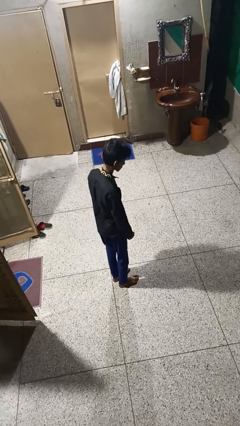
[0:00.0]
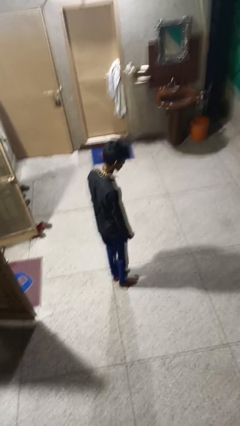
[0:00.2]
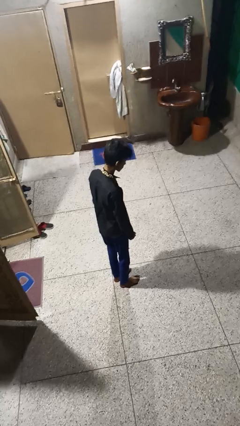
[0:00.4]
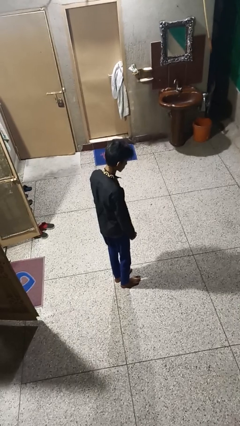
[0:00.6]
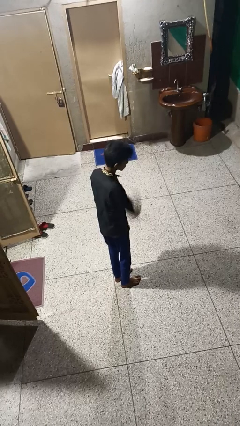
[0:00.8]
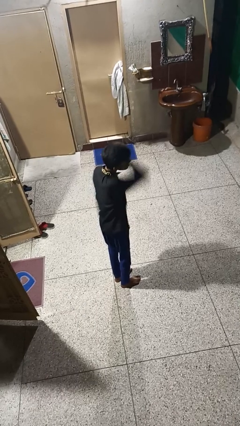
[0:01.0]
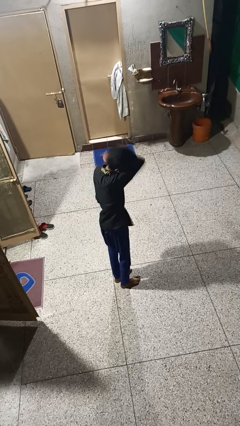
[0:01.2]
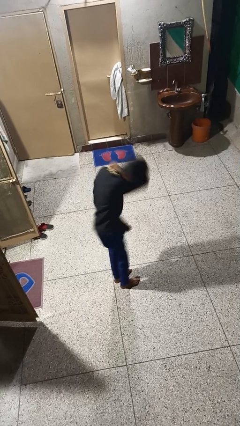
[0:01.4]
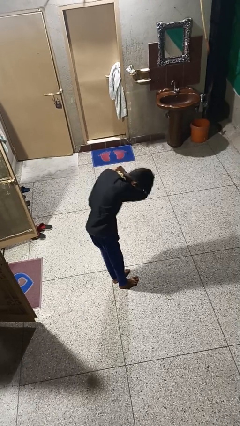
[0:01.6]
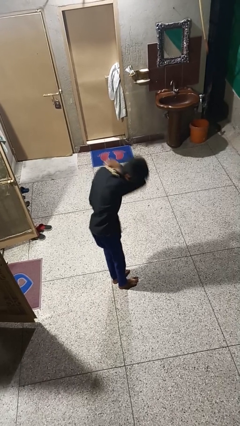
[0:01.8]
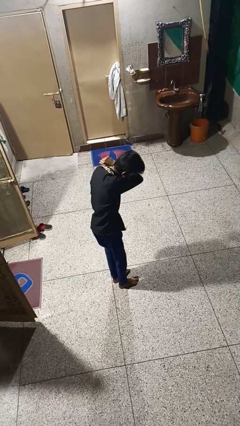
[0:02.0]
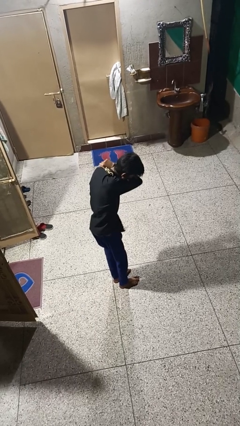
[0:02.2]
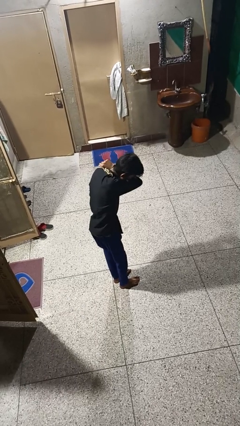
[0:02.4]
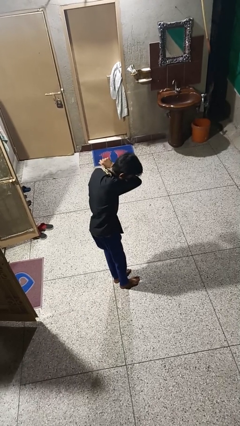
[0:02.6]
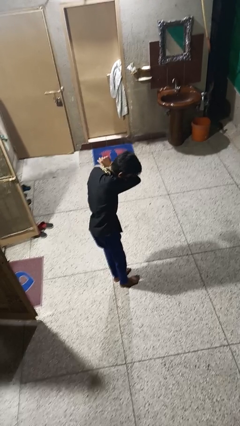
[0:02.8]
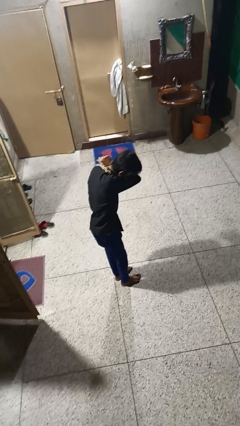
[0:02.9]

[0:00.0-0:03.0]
person sneezes into arm

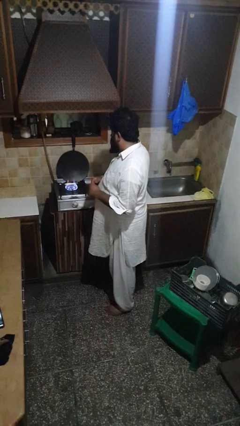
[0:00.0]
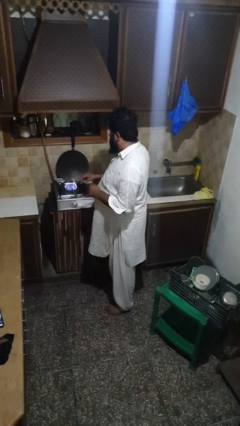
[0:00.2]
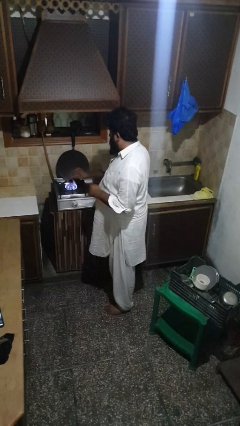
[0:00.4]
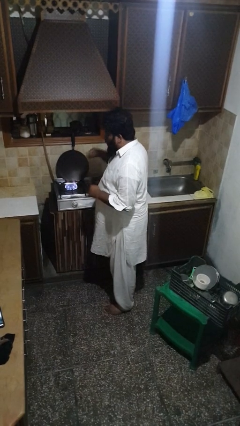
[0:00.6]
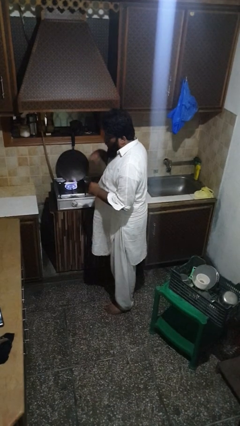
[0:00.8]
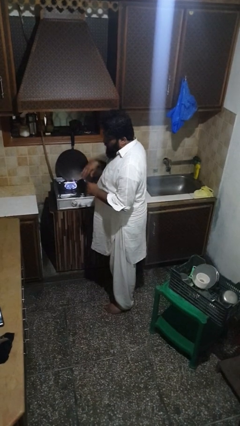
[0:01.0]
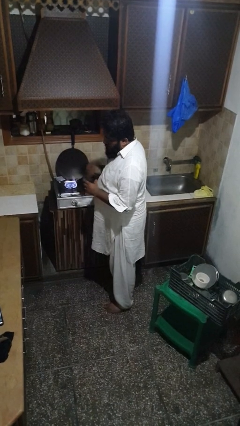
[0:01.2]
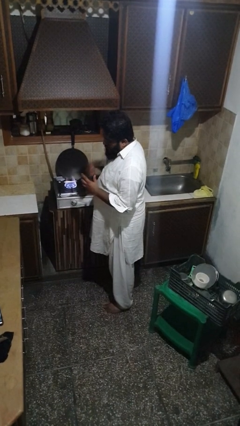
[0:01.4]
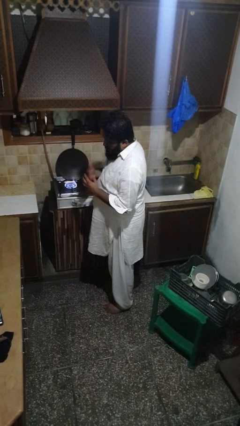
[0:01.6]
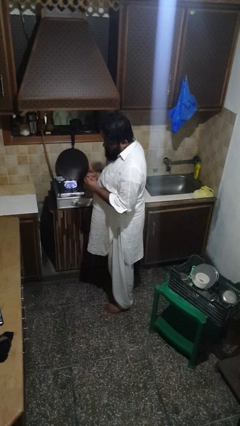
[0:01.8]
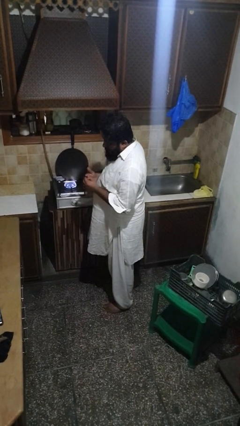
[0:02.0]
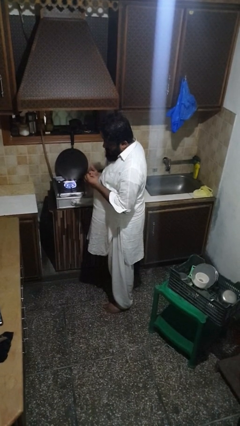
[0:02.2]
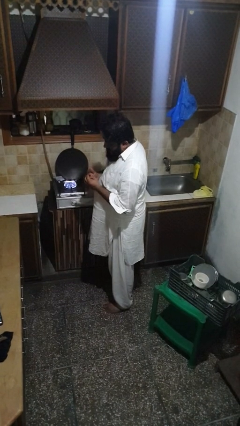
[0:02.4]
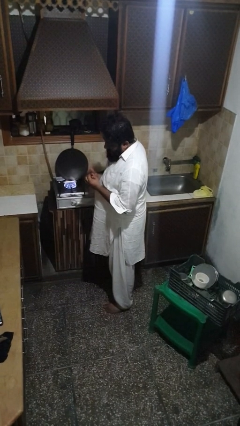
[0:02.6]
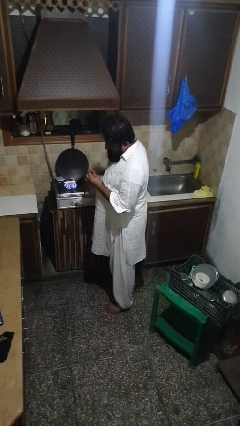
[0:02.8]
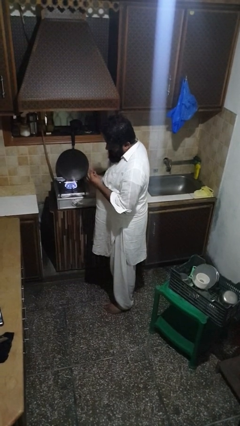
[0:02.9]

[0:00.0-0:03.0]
person burns hand

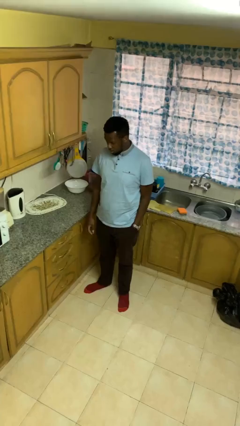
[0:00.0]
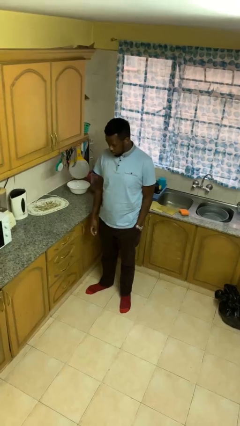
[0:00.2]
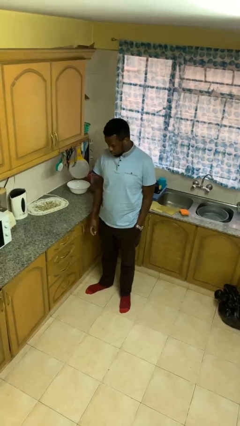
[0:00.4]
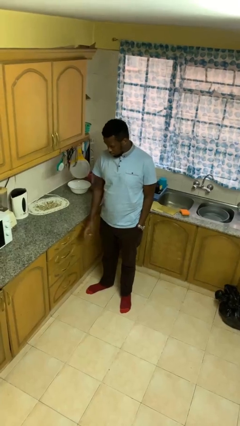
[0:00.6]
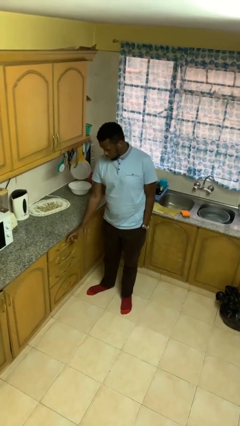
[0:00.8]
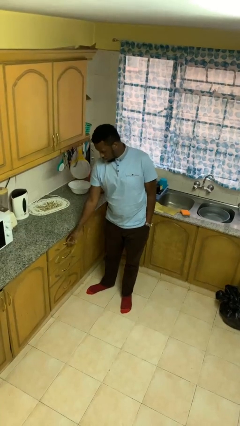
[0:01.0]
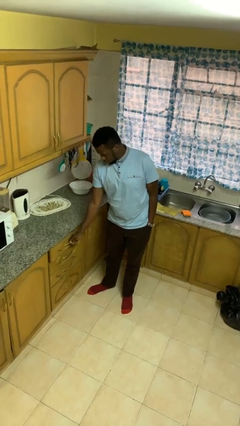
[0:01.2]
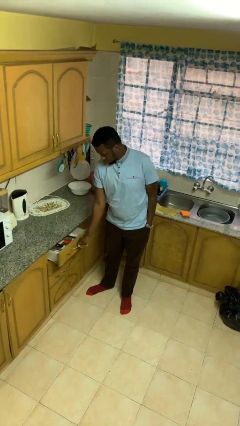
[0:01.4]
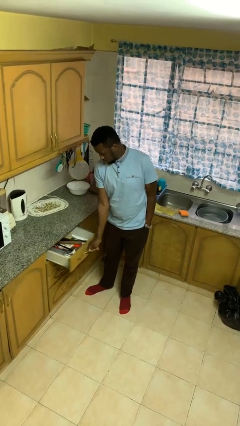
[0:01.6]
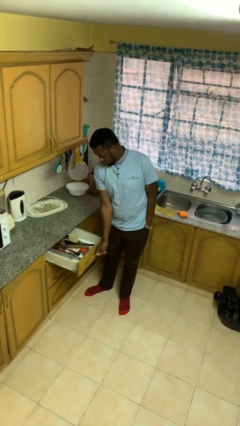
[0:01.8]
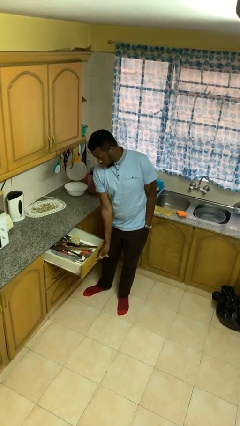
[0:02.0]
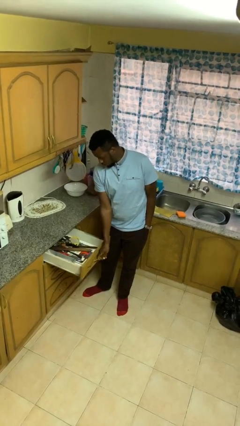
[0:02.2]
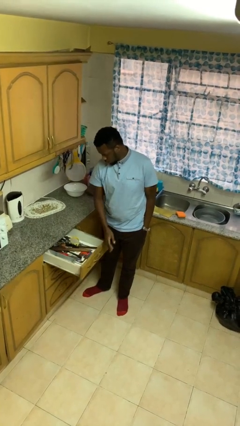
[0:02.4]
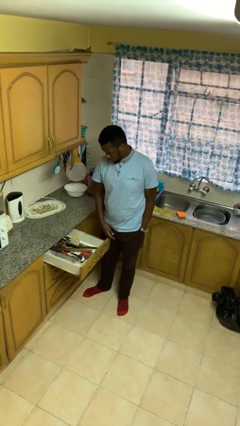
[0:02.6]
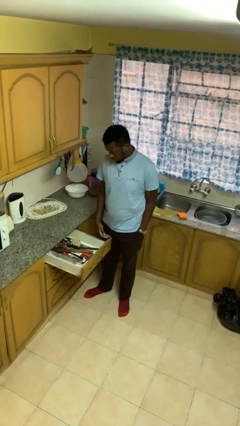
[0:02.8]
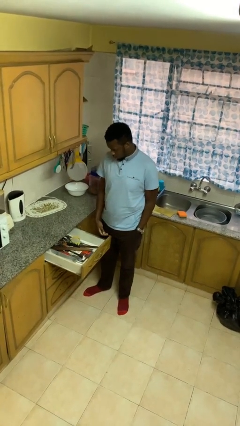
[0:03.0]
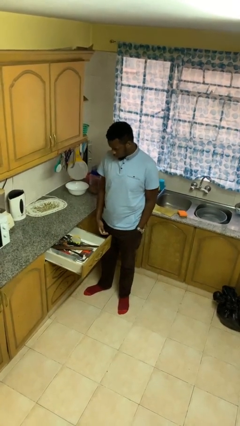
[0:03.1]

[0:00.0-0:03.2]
person opens kitchen drawer

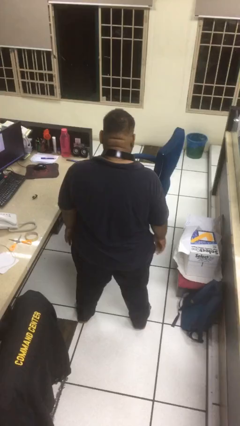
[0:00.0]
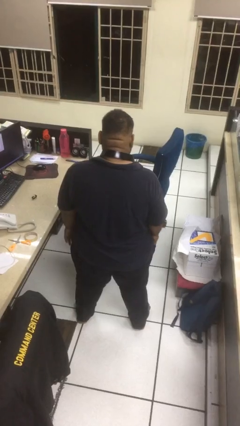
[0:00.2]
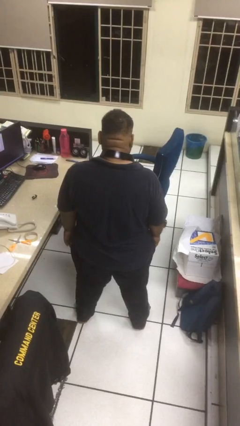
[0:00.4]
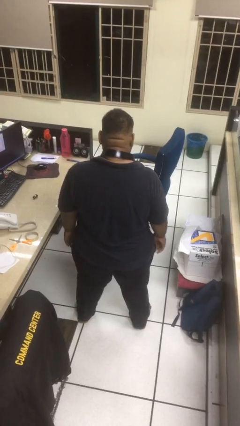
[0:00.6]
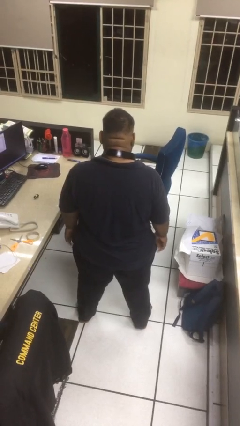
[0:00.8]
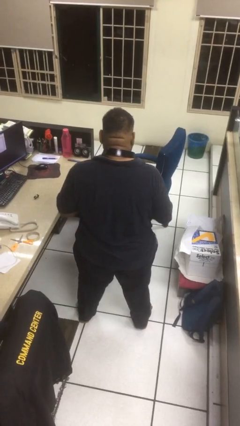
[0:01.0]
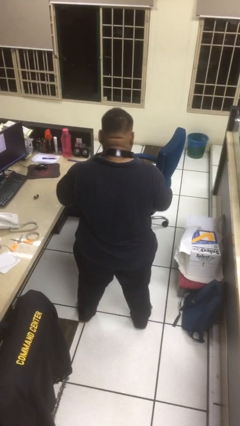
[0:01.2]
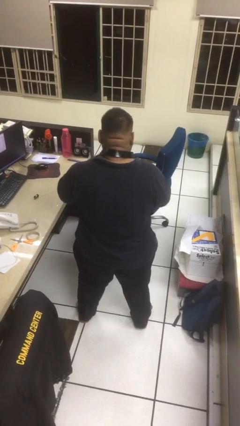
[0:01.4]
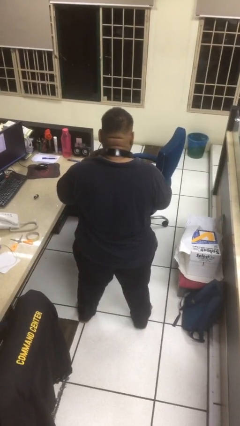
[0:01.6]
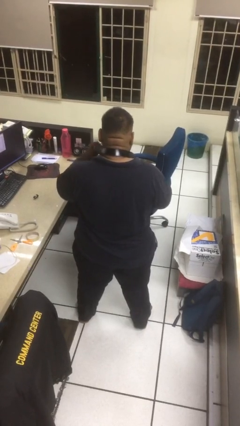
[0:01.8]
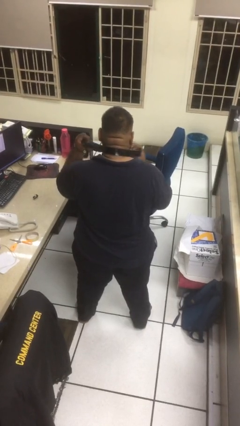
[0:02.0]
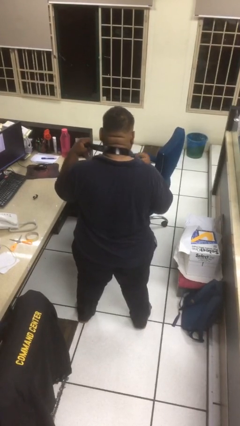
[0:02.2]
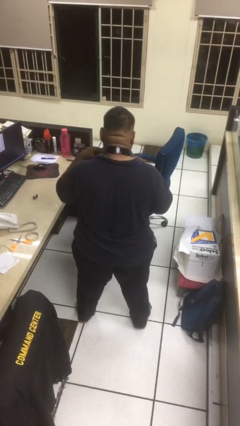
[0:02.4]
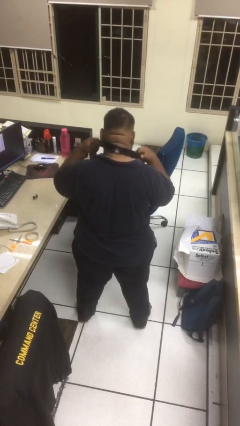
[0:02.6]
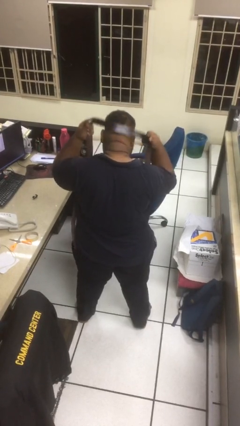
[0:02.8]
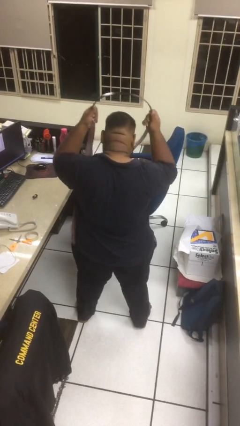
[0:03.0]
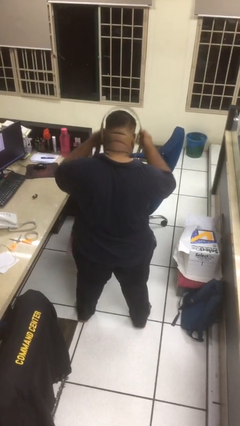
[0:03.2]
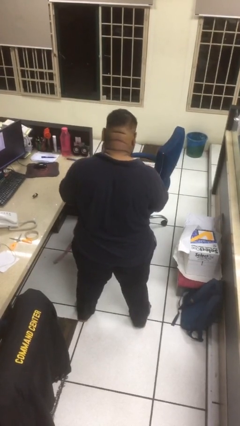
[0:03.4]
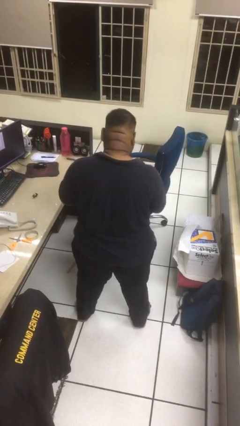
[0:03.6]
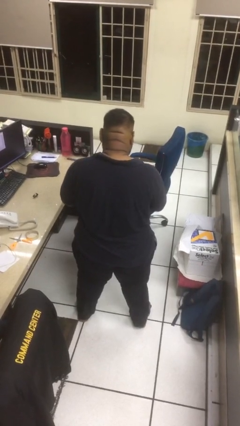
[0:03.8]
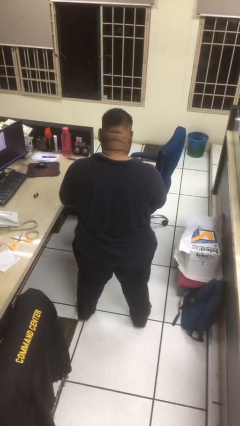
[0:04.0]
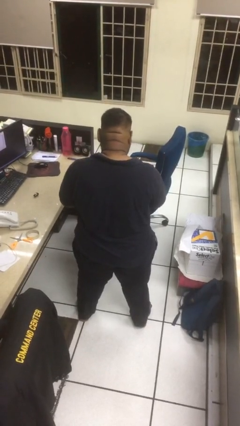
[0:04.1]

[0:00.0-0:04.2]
person takes off necktie

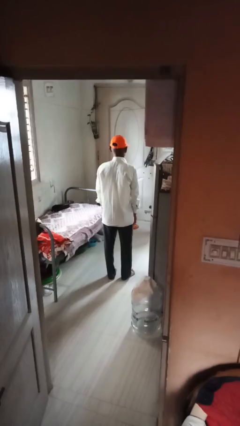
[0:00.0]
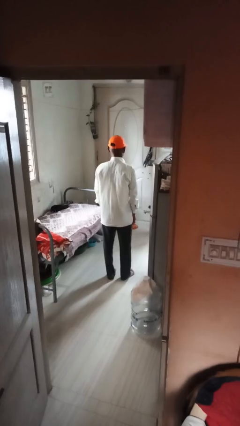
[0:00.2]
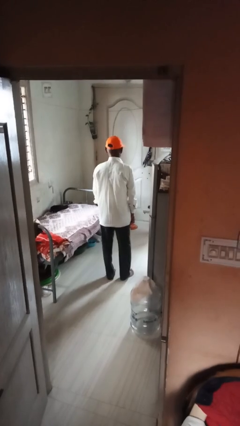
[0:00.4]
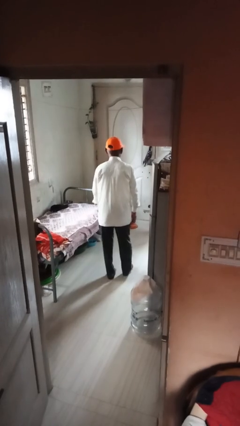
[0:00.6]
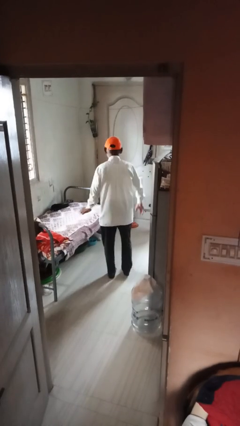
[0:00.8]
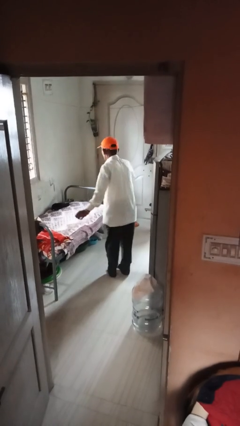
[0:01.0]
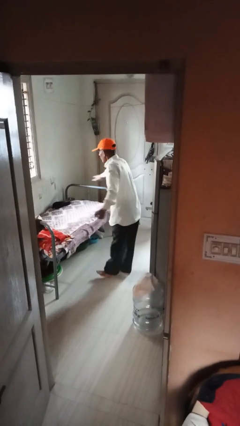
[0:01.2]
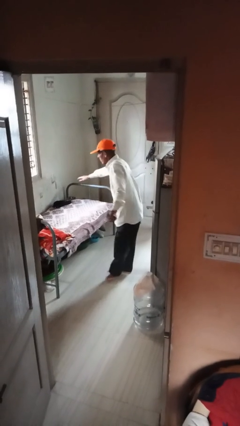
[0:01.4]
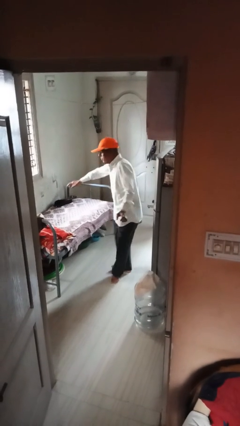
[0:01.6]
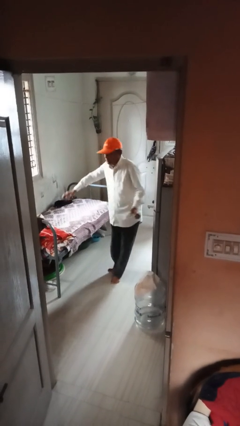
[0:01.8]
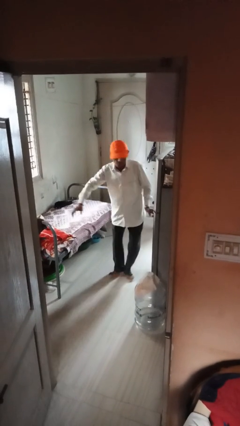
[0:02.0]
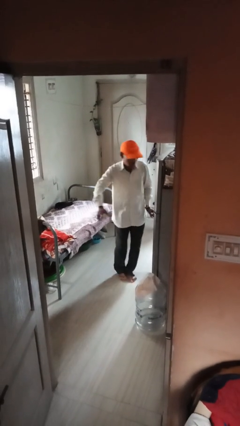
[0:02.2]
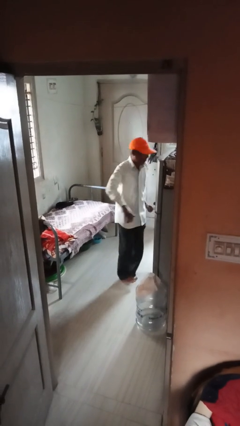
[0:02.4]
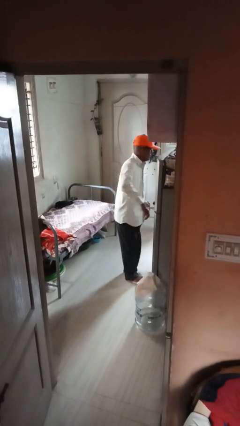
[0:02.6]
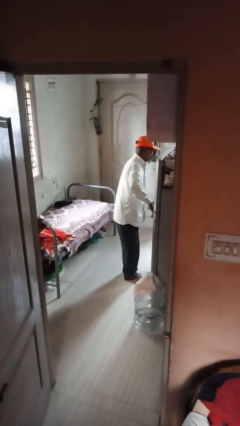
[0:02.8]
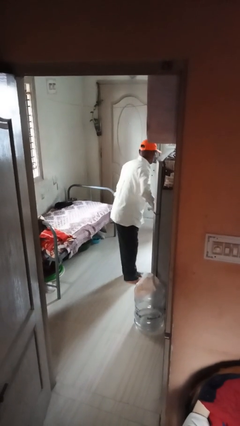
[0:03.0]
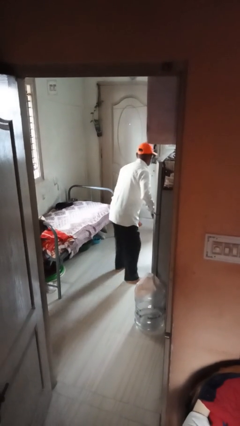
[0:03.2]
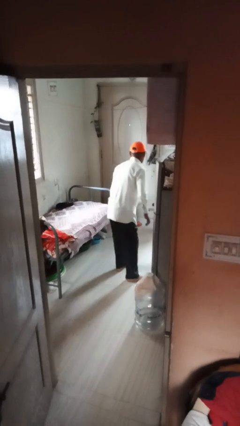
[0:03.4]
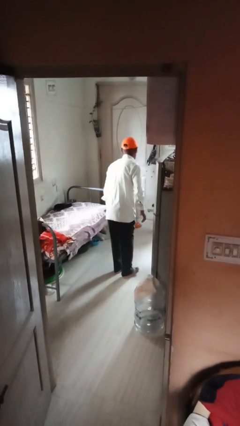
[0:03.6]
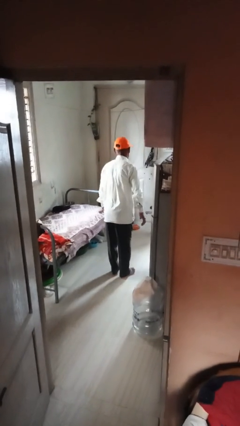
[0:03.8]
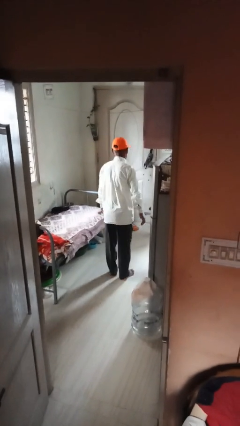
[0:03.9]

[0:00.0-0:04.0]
person twirls

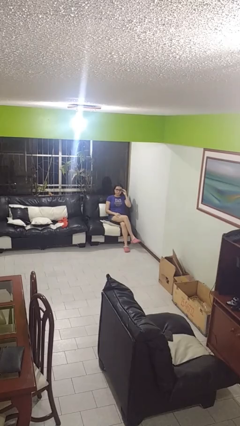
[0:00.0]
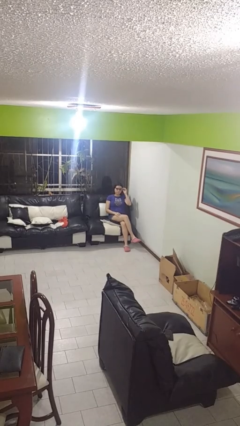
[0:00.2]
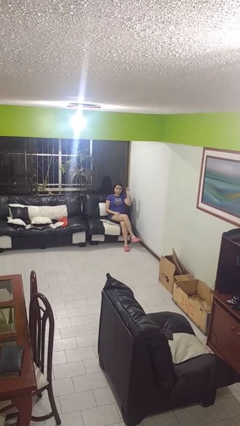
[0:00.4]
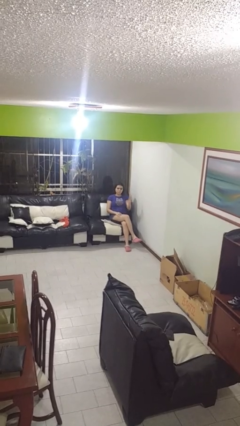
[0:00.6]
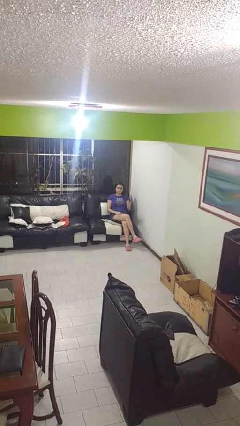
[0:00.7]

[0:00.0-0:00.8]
person takes off glasses
